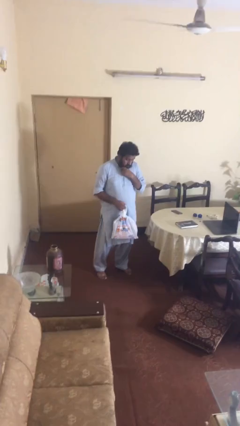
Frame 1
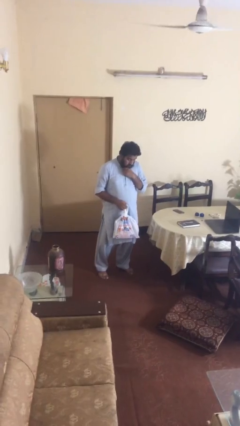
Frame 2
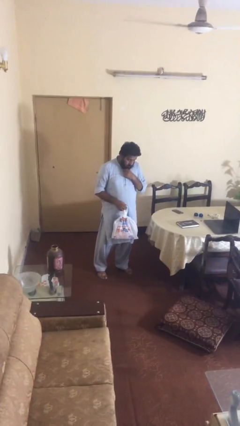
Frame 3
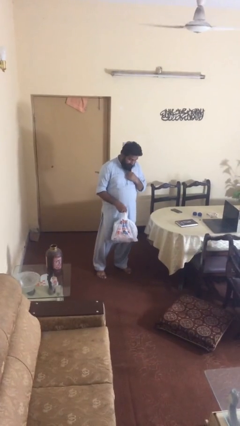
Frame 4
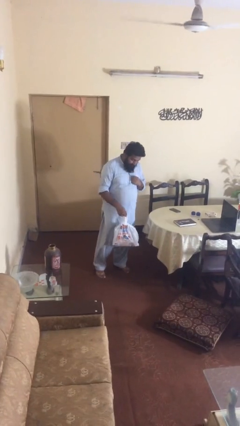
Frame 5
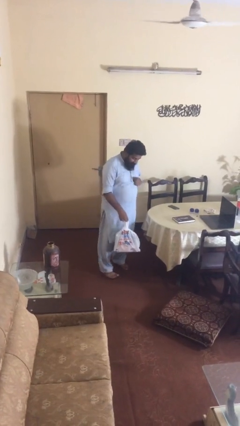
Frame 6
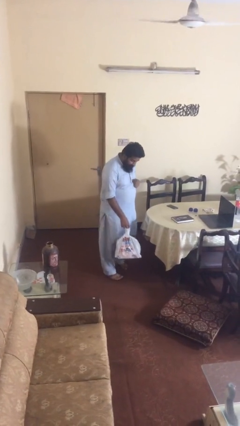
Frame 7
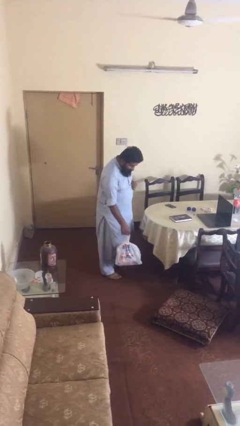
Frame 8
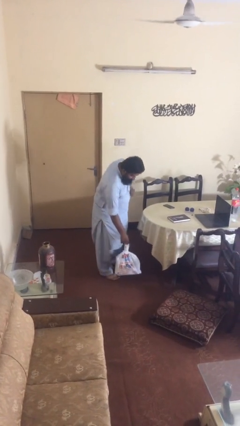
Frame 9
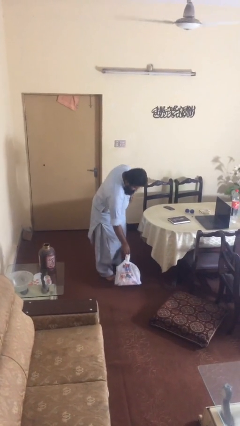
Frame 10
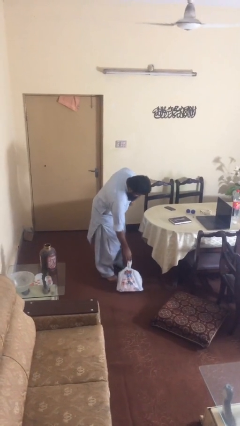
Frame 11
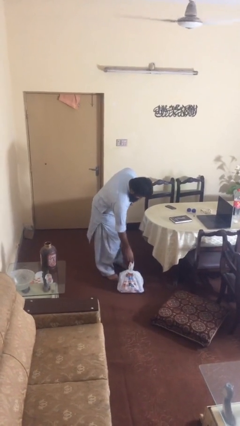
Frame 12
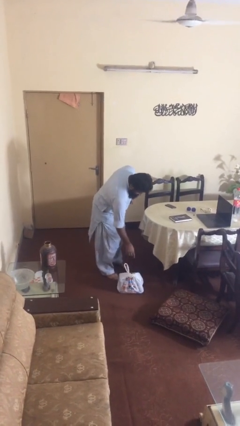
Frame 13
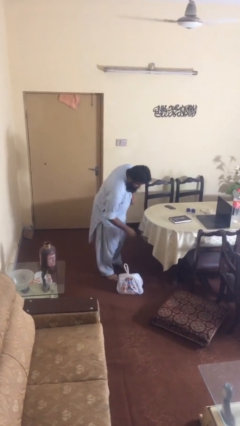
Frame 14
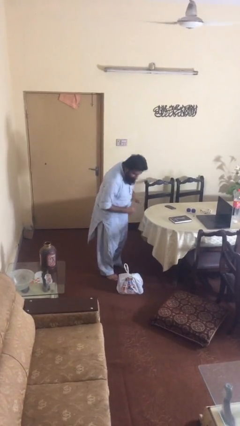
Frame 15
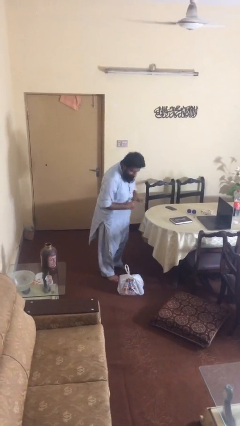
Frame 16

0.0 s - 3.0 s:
person puts down object on floor

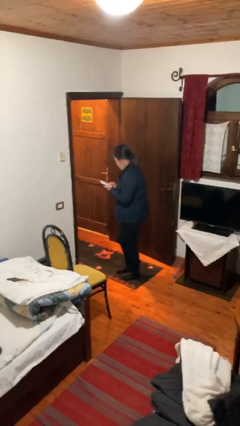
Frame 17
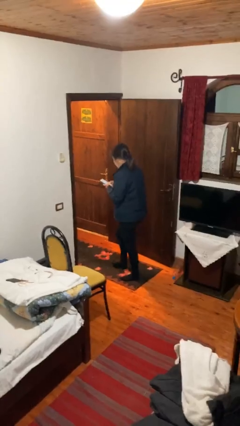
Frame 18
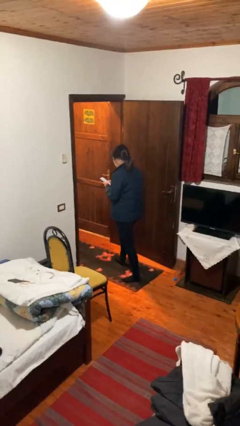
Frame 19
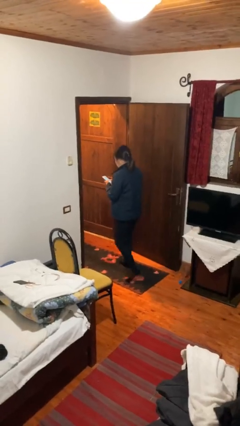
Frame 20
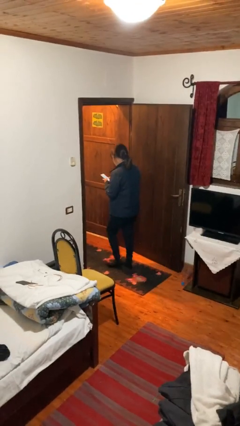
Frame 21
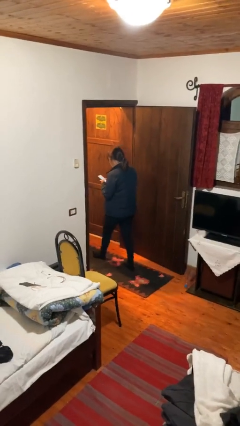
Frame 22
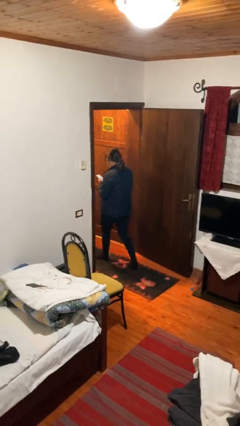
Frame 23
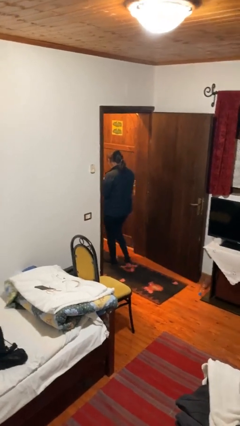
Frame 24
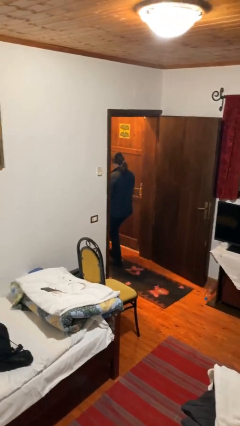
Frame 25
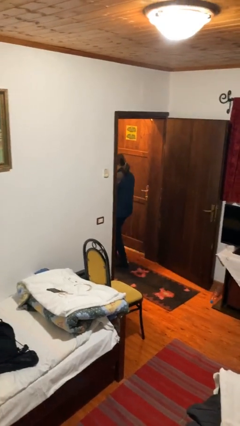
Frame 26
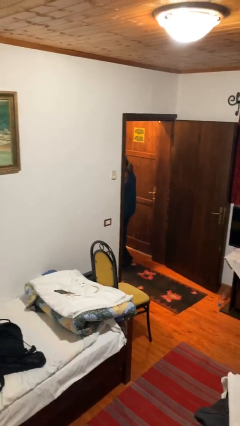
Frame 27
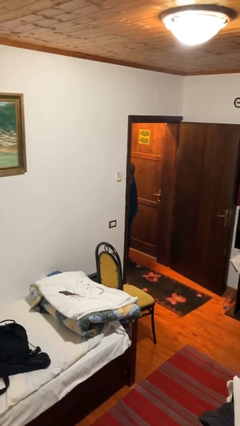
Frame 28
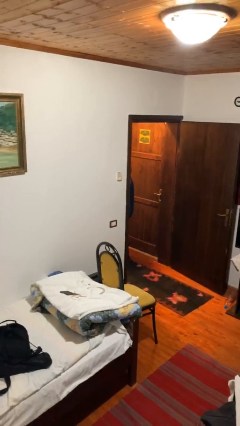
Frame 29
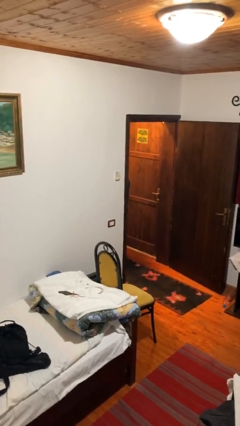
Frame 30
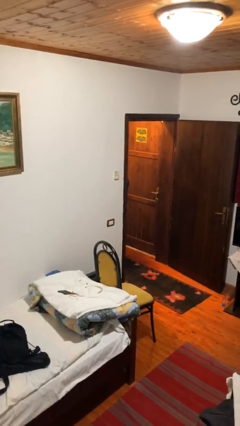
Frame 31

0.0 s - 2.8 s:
person exits scene through structure

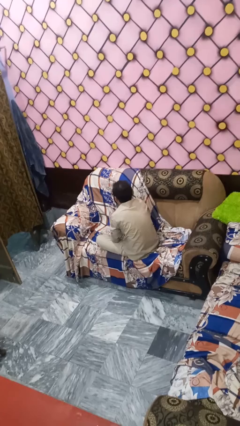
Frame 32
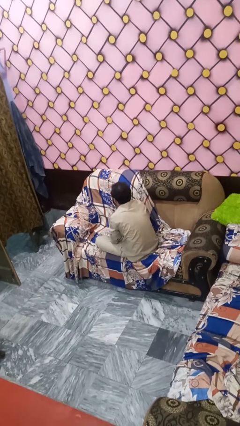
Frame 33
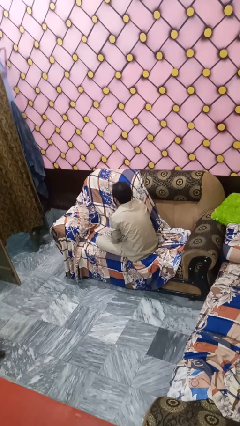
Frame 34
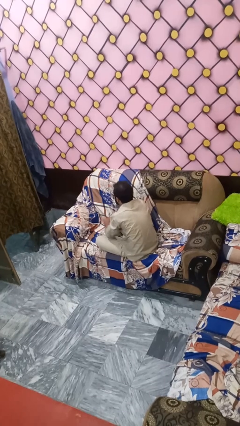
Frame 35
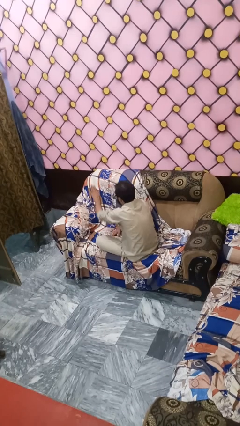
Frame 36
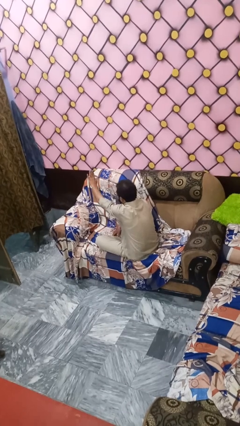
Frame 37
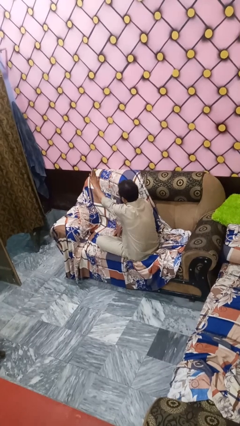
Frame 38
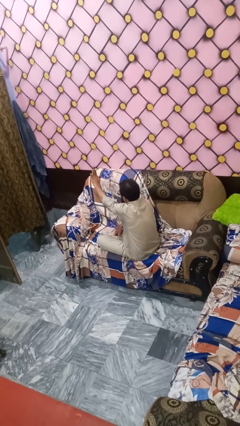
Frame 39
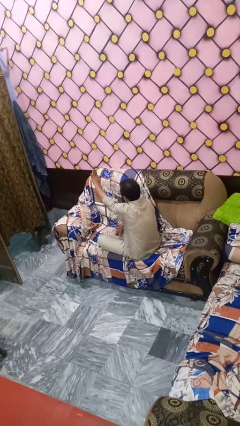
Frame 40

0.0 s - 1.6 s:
person gestures stop

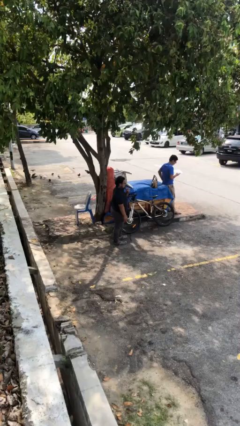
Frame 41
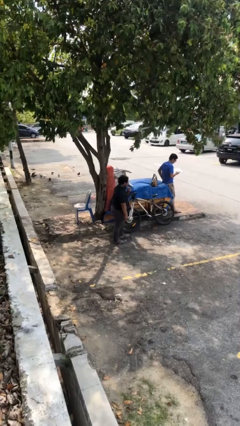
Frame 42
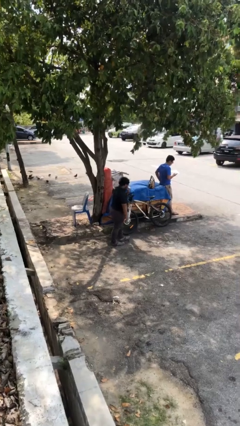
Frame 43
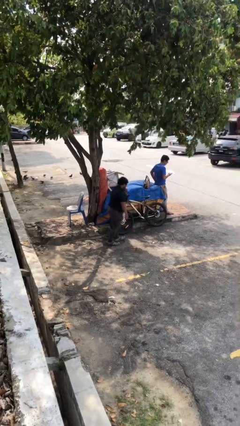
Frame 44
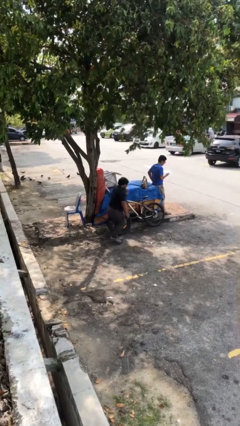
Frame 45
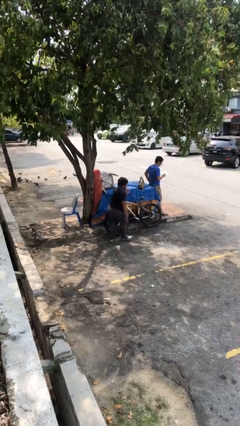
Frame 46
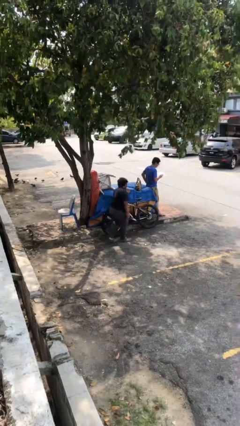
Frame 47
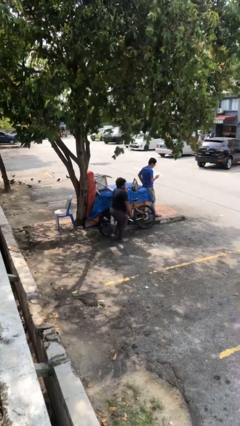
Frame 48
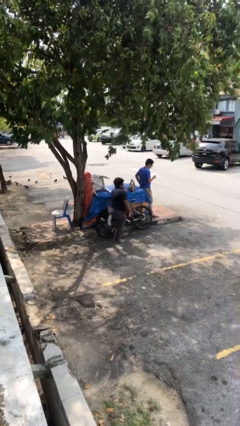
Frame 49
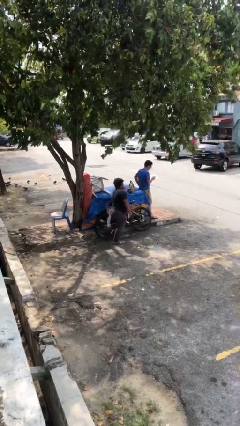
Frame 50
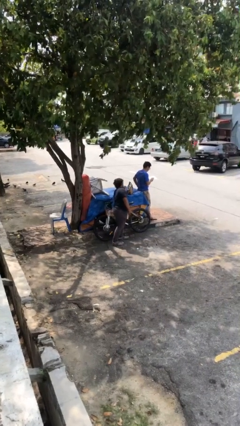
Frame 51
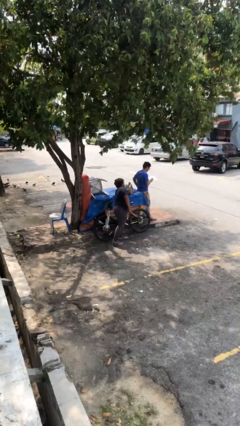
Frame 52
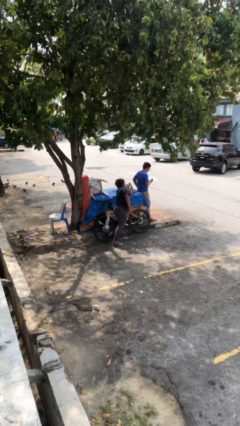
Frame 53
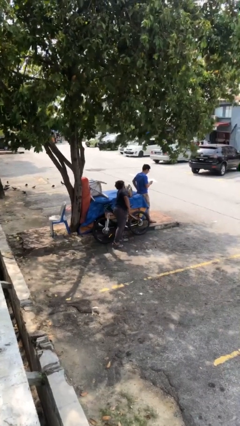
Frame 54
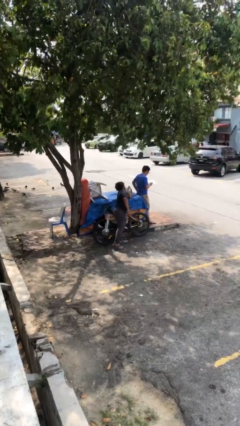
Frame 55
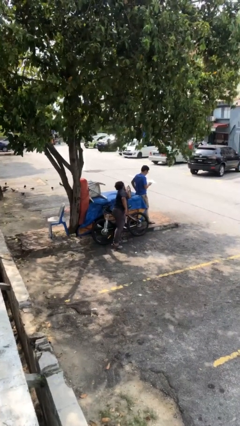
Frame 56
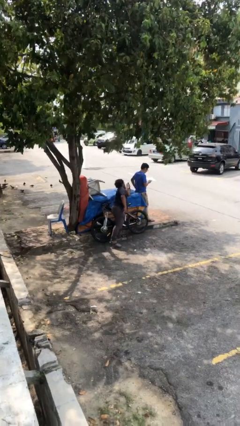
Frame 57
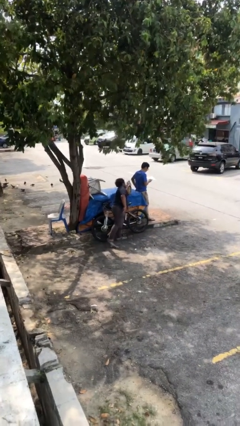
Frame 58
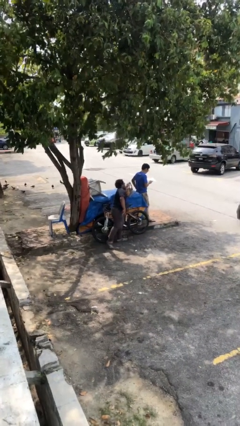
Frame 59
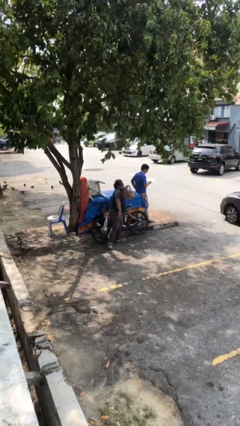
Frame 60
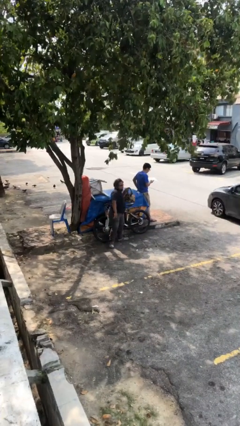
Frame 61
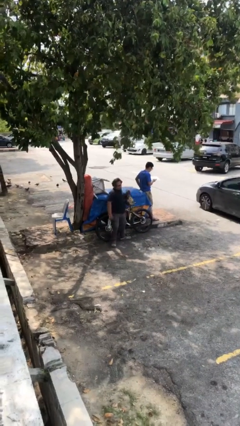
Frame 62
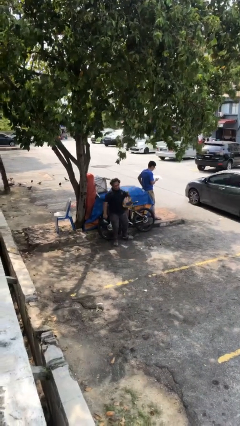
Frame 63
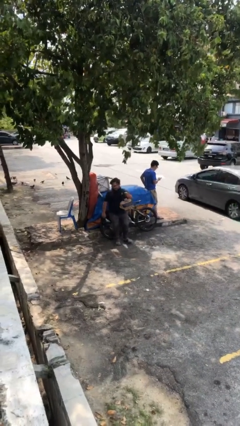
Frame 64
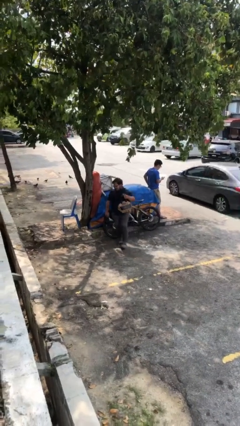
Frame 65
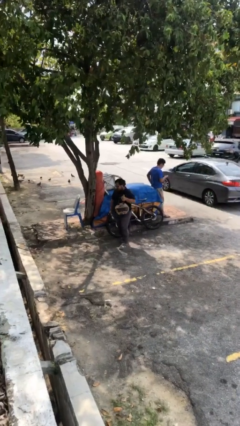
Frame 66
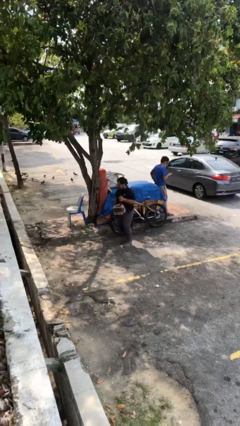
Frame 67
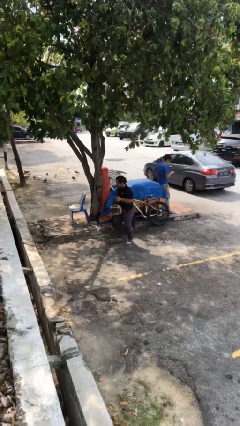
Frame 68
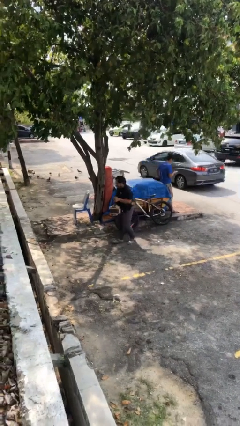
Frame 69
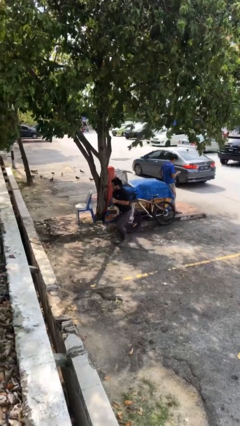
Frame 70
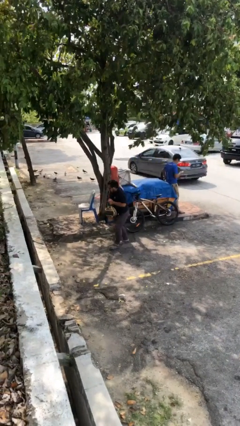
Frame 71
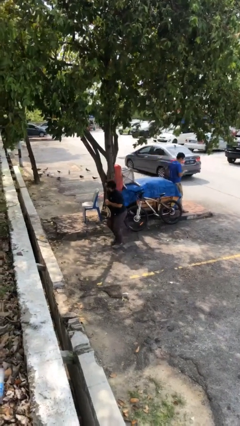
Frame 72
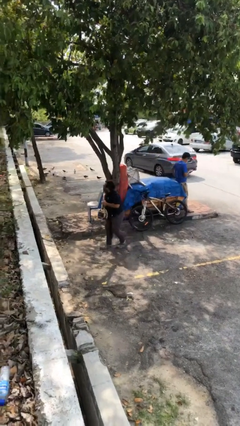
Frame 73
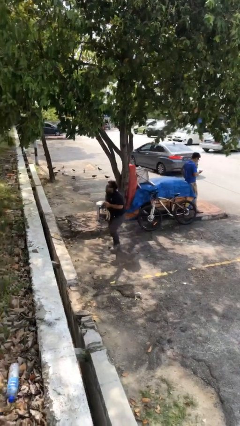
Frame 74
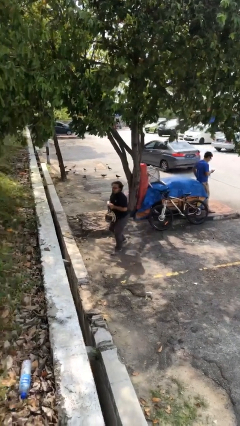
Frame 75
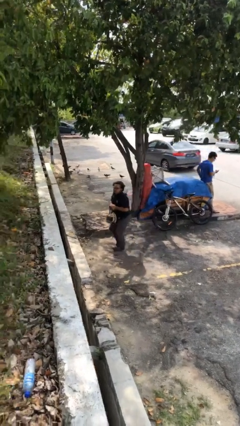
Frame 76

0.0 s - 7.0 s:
person steals object from person

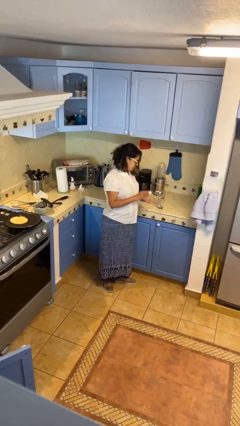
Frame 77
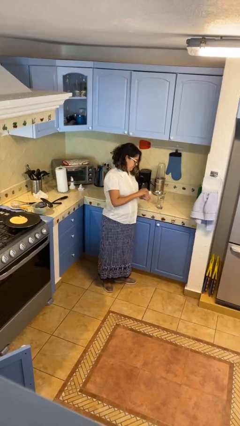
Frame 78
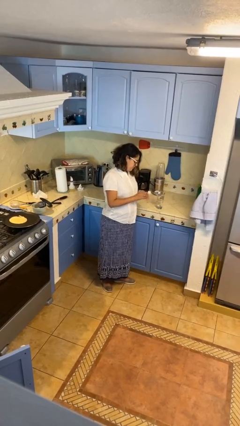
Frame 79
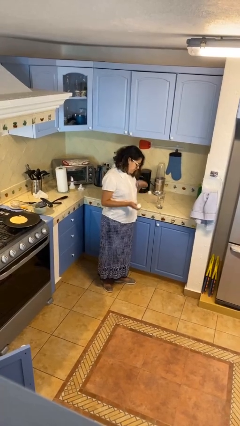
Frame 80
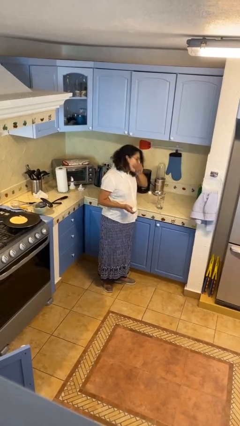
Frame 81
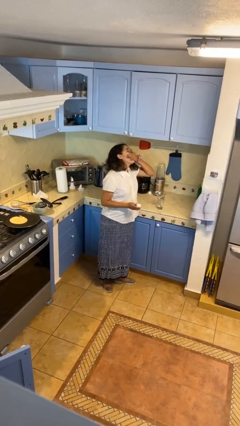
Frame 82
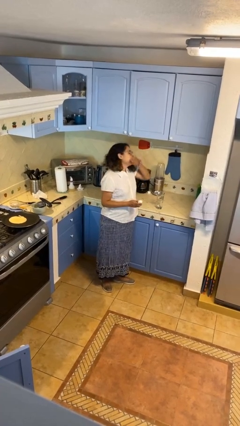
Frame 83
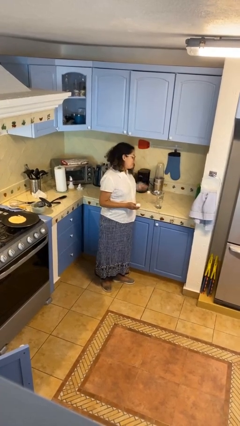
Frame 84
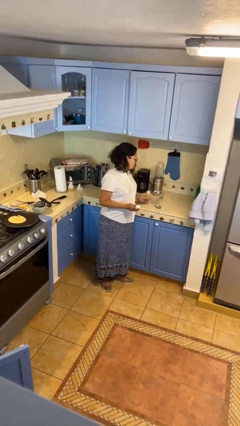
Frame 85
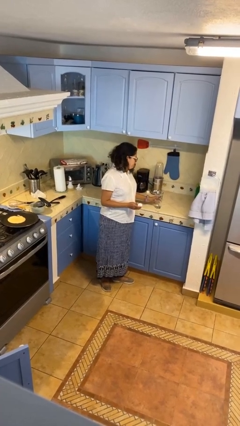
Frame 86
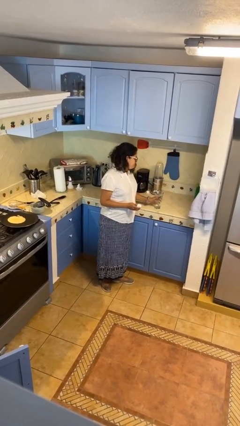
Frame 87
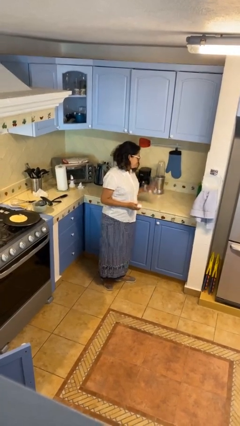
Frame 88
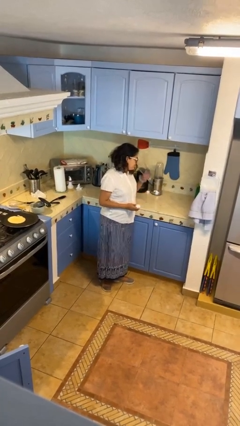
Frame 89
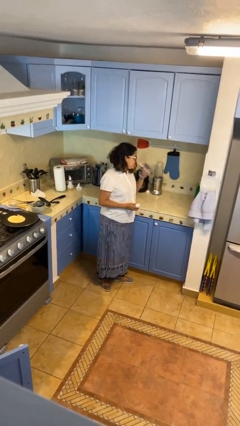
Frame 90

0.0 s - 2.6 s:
person takes medicine pills

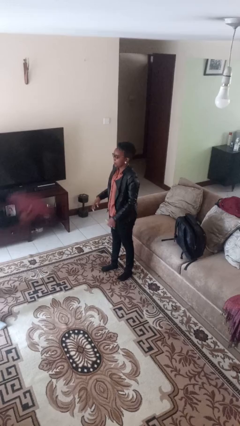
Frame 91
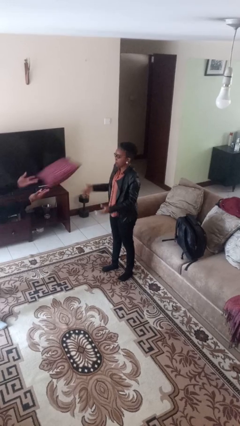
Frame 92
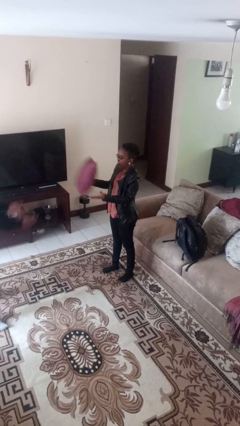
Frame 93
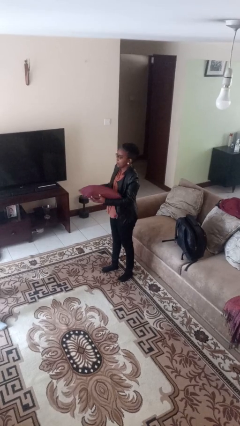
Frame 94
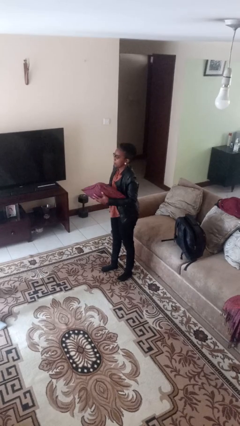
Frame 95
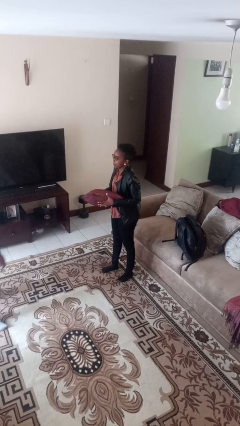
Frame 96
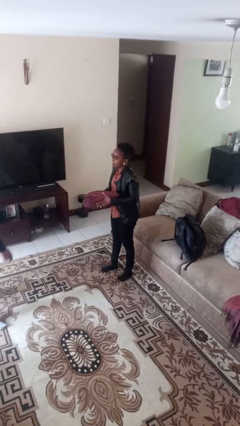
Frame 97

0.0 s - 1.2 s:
person catches object from person
